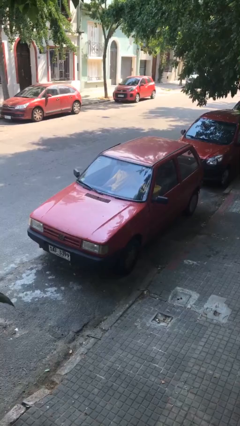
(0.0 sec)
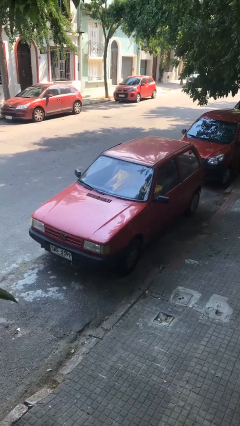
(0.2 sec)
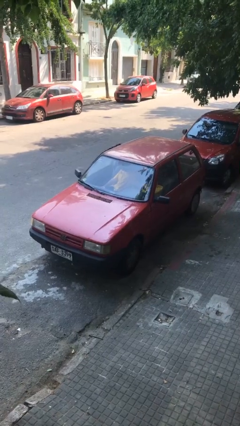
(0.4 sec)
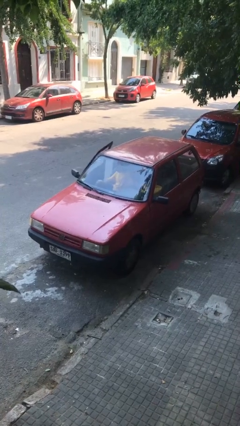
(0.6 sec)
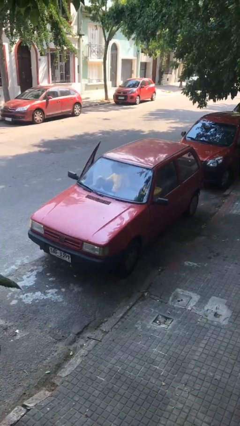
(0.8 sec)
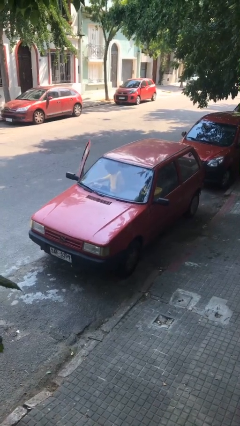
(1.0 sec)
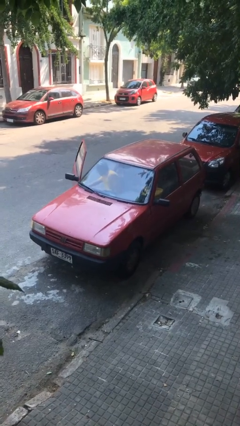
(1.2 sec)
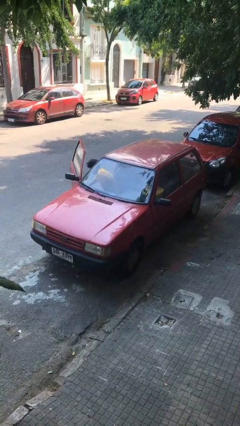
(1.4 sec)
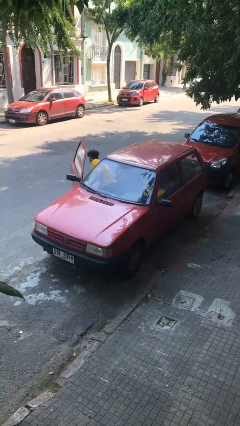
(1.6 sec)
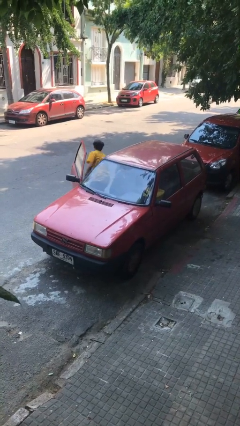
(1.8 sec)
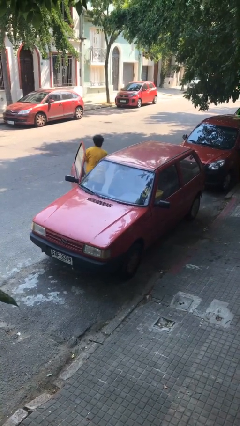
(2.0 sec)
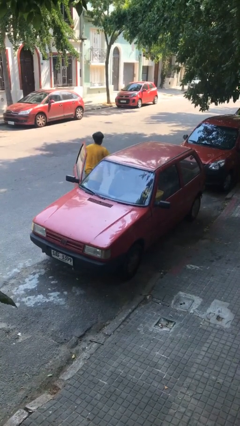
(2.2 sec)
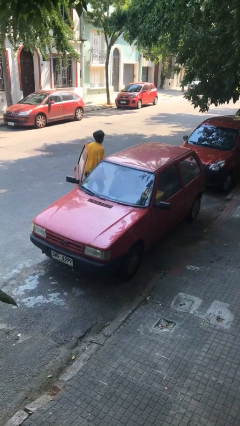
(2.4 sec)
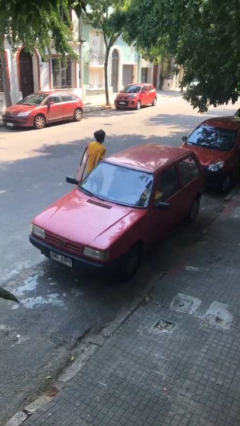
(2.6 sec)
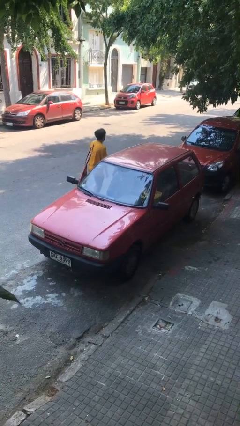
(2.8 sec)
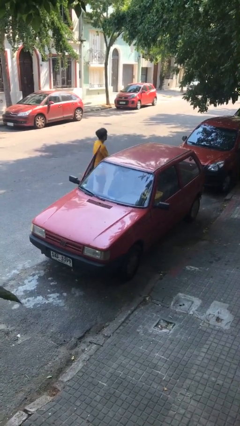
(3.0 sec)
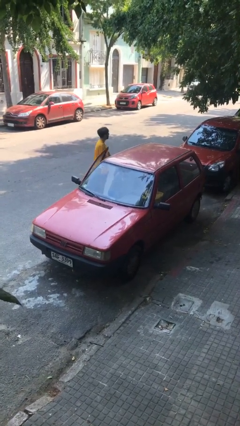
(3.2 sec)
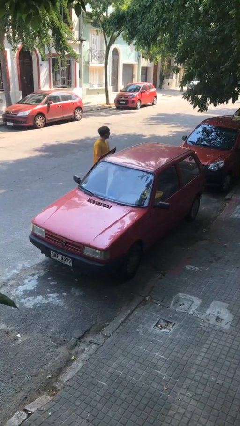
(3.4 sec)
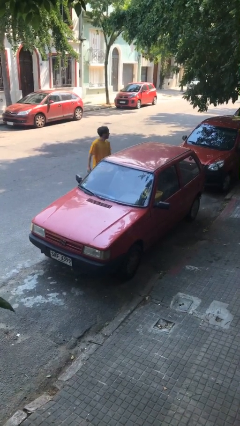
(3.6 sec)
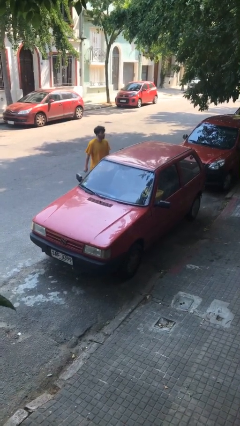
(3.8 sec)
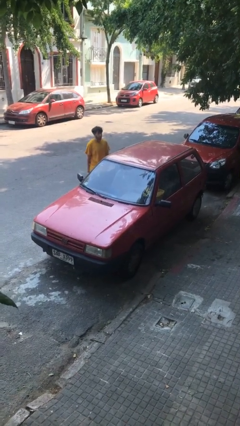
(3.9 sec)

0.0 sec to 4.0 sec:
car drops off person

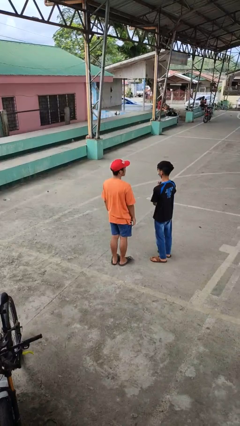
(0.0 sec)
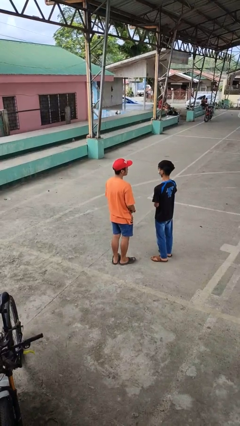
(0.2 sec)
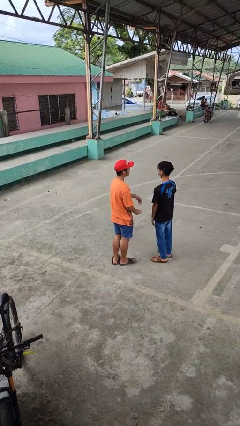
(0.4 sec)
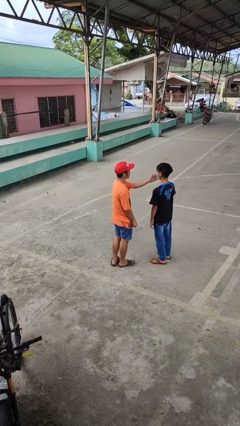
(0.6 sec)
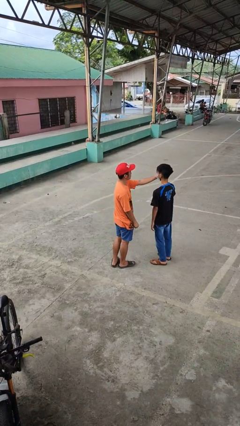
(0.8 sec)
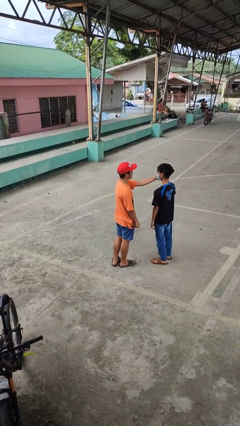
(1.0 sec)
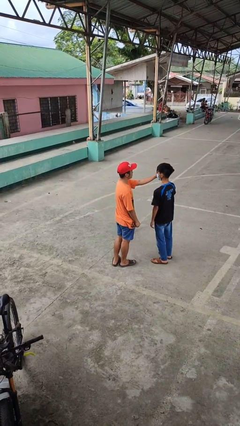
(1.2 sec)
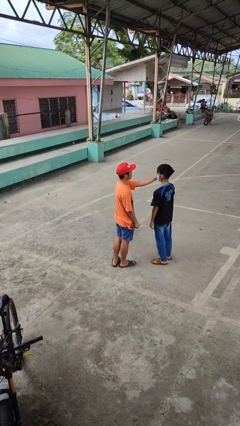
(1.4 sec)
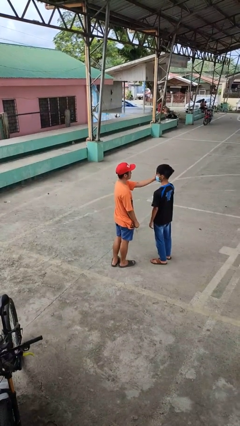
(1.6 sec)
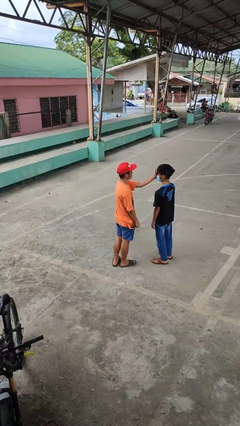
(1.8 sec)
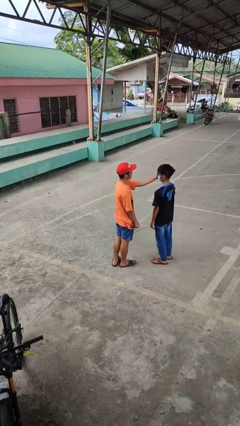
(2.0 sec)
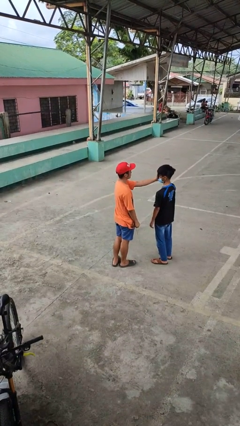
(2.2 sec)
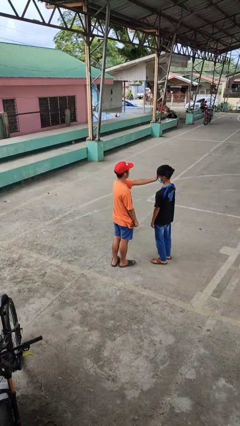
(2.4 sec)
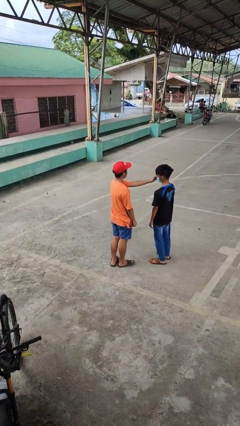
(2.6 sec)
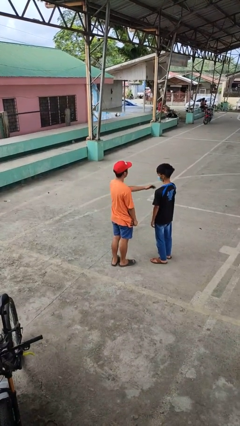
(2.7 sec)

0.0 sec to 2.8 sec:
person touches face of person

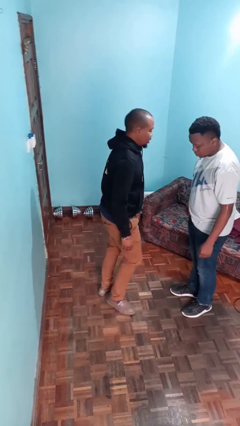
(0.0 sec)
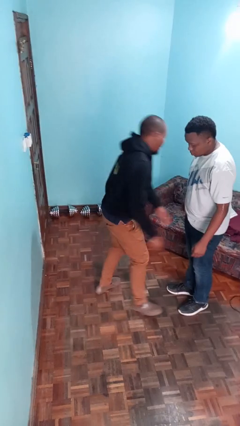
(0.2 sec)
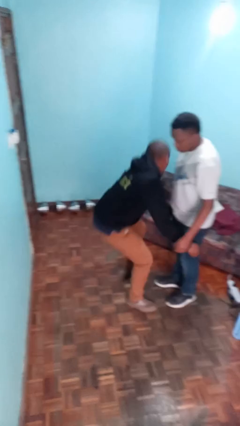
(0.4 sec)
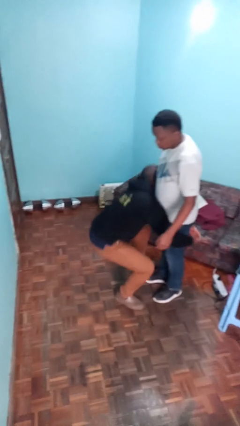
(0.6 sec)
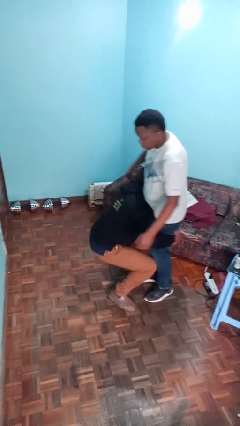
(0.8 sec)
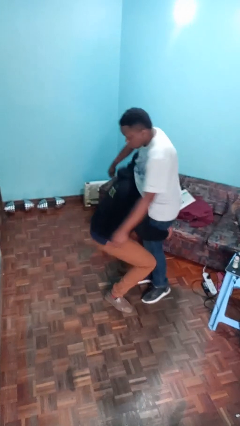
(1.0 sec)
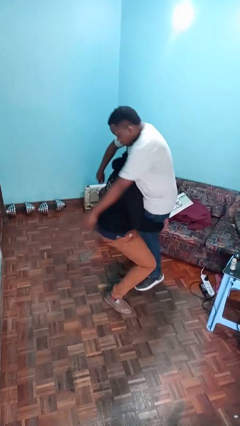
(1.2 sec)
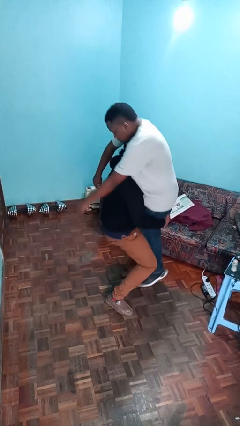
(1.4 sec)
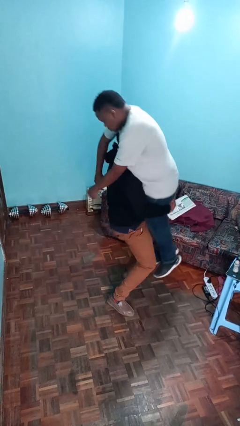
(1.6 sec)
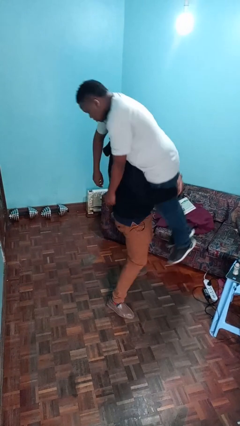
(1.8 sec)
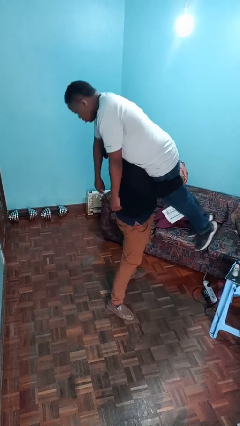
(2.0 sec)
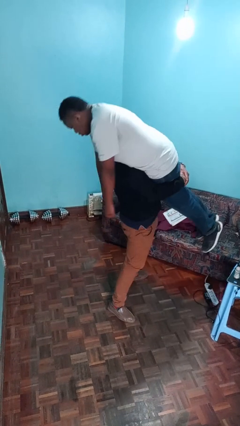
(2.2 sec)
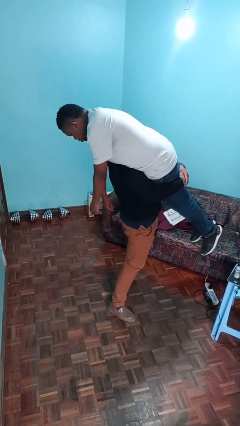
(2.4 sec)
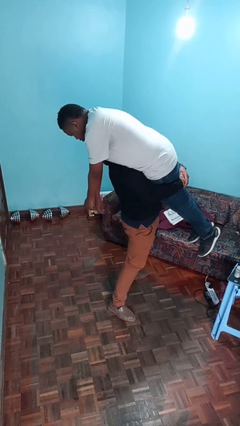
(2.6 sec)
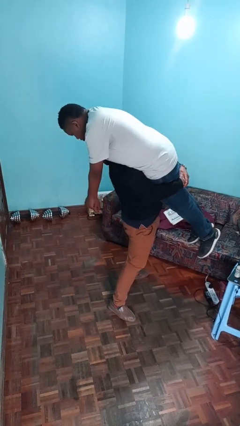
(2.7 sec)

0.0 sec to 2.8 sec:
person carries person over shoulder

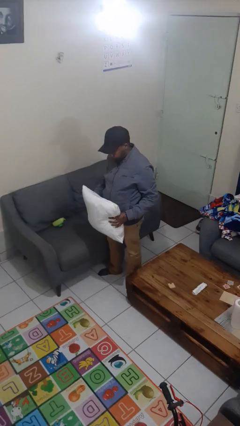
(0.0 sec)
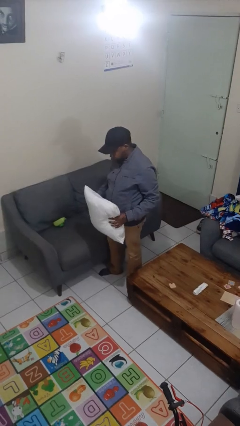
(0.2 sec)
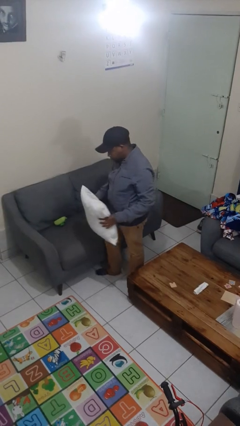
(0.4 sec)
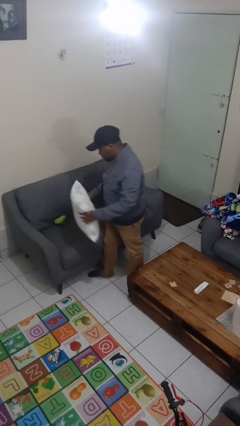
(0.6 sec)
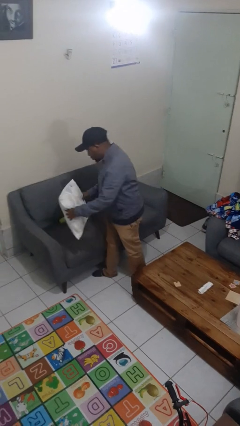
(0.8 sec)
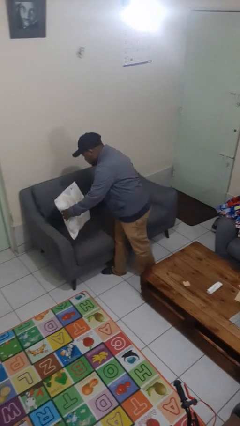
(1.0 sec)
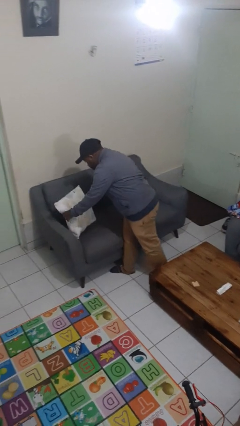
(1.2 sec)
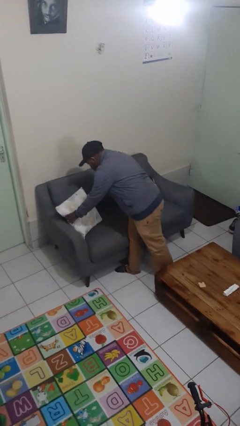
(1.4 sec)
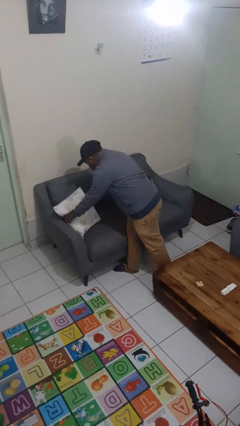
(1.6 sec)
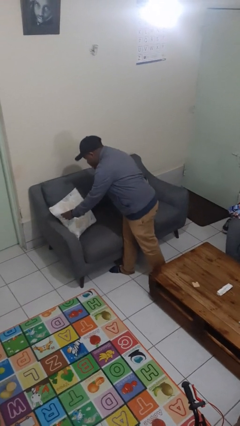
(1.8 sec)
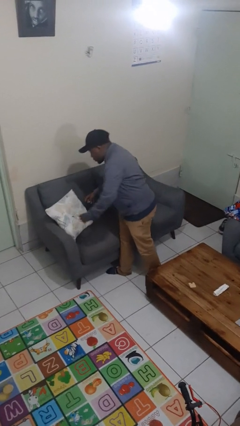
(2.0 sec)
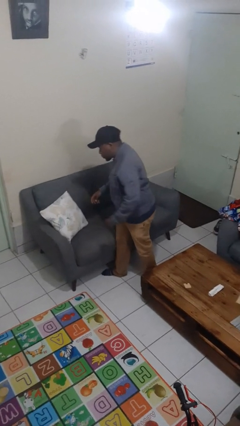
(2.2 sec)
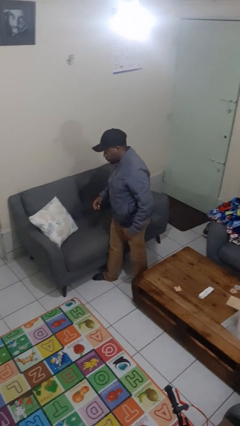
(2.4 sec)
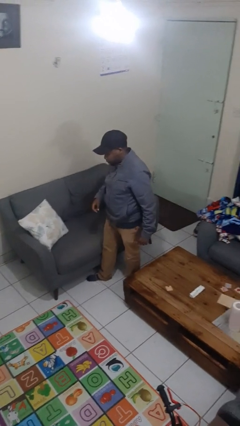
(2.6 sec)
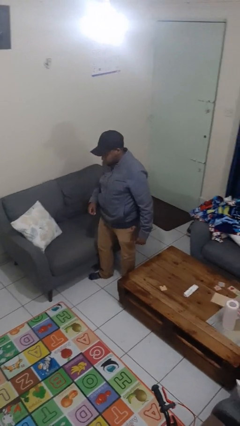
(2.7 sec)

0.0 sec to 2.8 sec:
person puts down object on couch

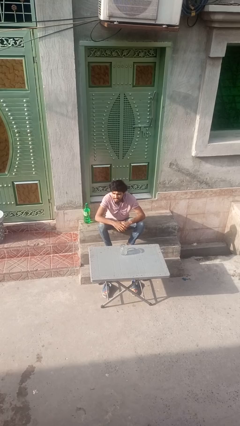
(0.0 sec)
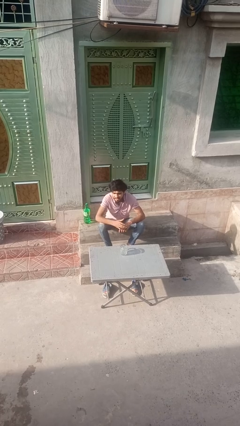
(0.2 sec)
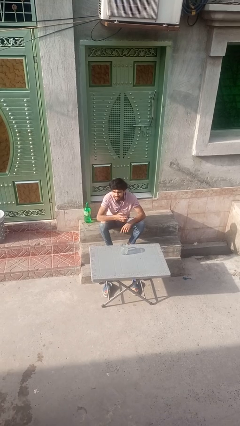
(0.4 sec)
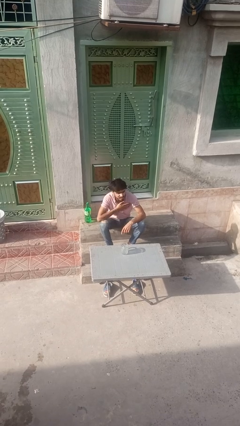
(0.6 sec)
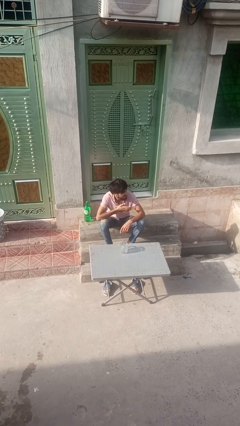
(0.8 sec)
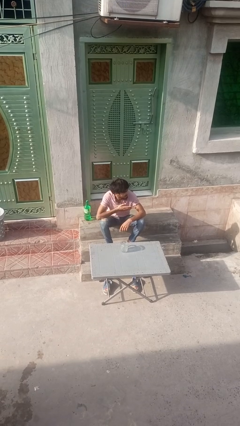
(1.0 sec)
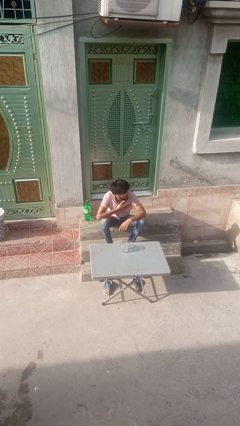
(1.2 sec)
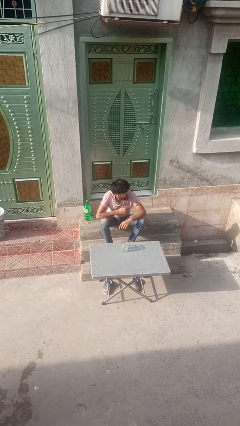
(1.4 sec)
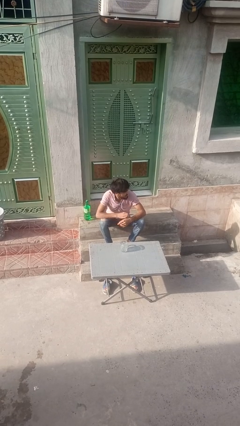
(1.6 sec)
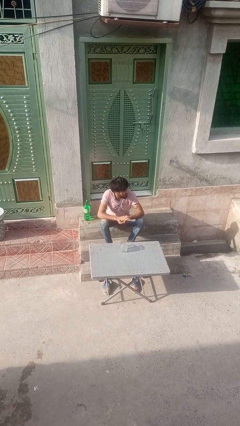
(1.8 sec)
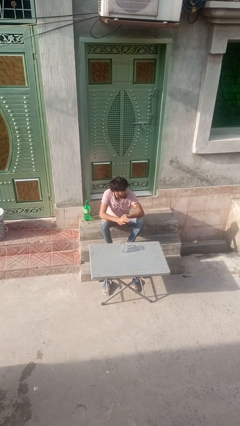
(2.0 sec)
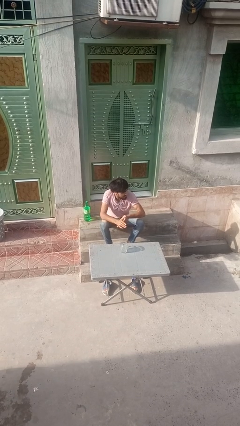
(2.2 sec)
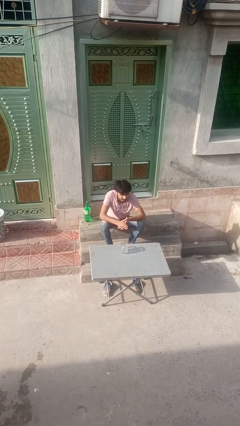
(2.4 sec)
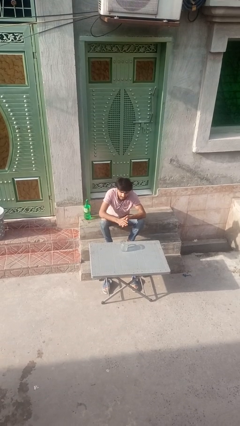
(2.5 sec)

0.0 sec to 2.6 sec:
person drums on chest
